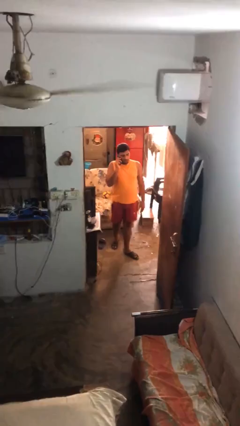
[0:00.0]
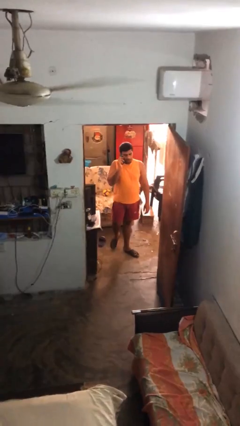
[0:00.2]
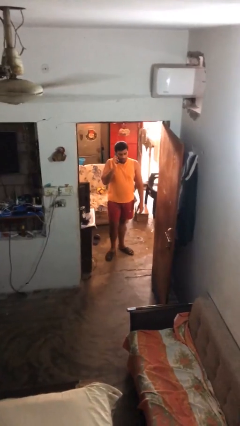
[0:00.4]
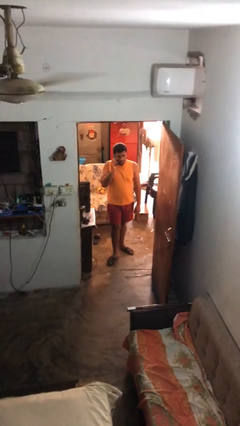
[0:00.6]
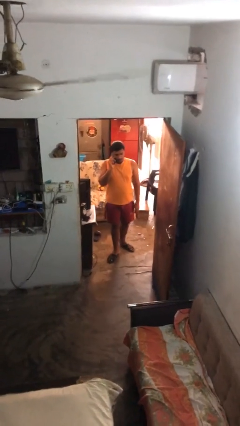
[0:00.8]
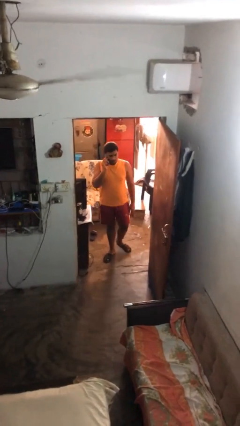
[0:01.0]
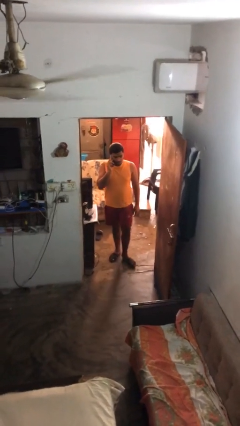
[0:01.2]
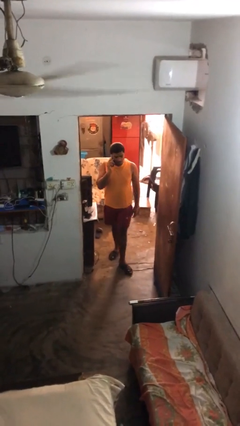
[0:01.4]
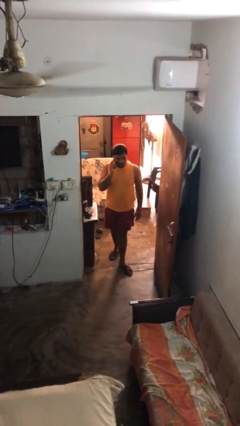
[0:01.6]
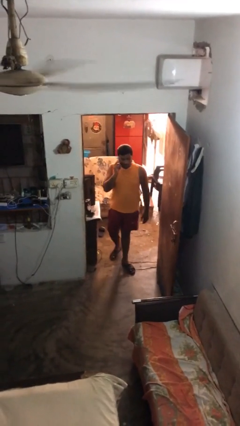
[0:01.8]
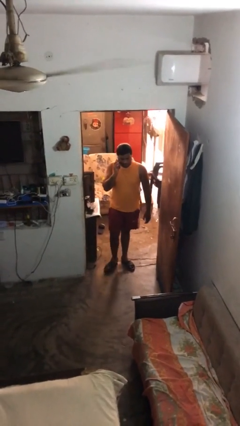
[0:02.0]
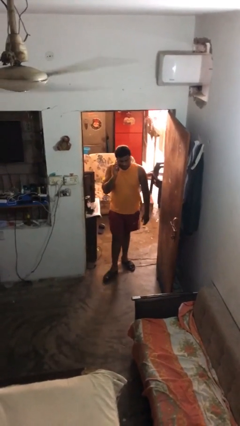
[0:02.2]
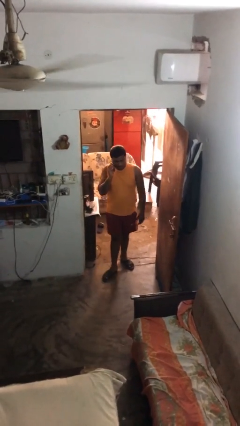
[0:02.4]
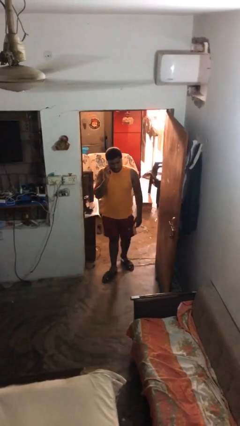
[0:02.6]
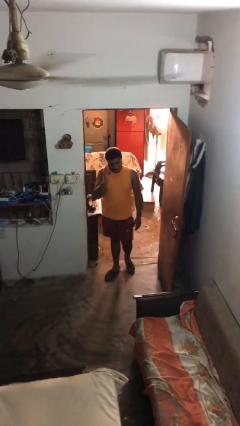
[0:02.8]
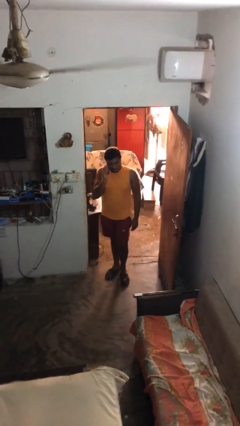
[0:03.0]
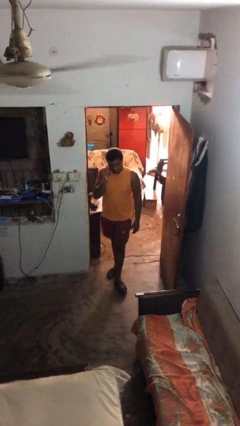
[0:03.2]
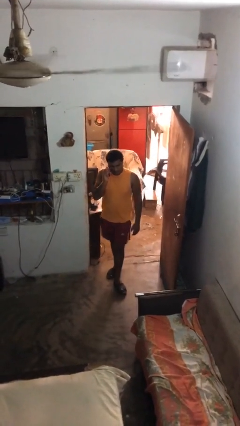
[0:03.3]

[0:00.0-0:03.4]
person enters scene through structure

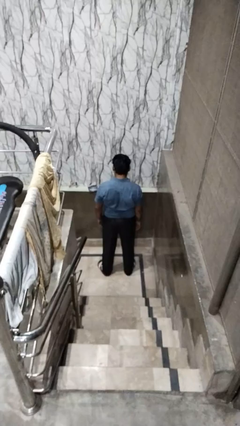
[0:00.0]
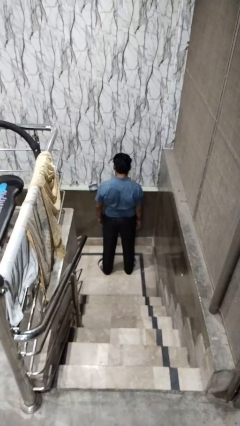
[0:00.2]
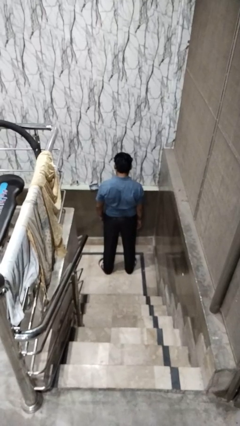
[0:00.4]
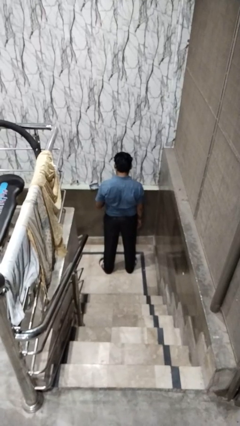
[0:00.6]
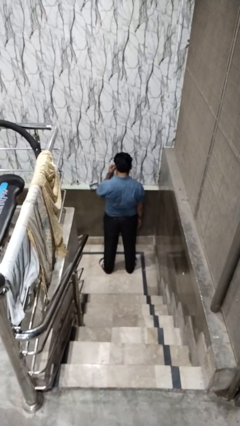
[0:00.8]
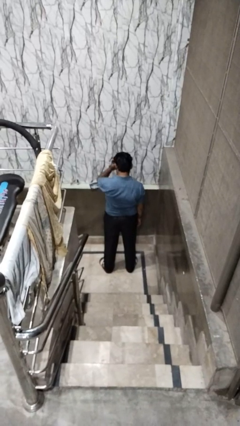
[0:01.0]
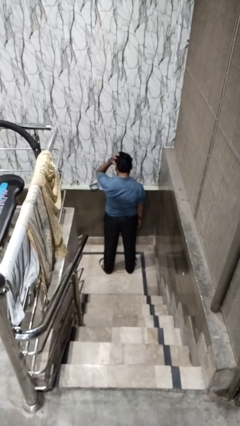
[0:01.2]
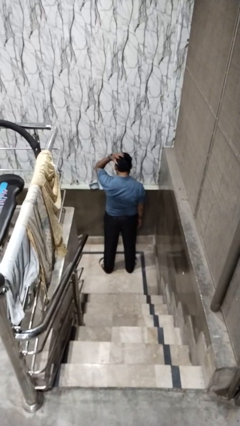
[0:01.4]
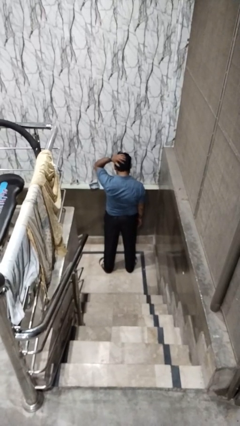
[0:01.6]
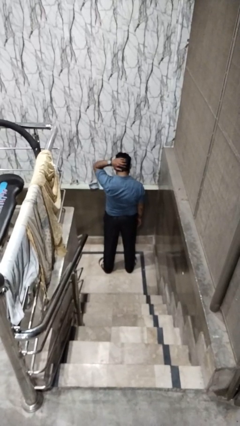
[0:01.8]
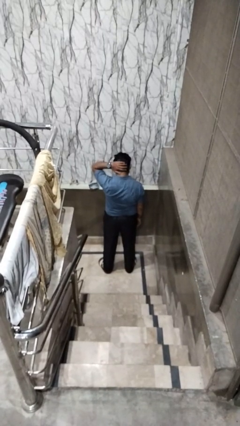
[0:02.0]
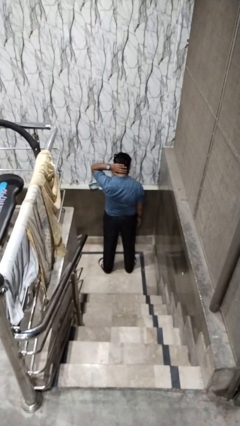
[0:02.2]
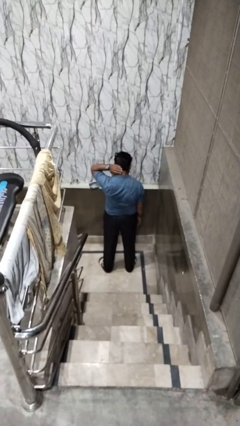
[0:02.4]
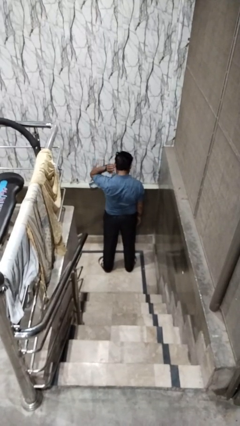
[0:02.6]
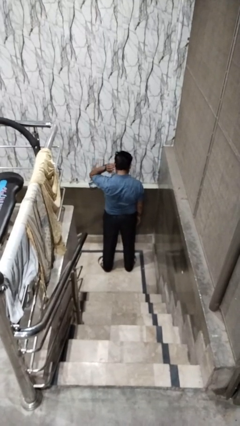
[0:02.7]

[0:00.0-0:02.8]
person strokes hair

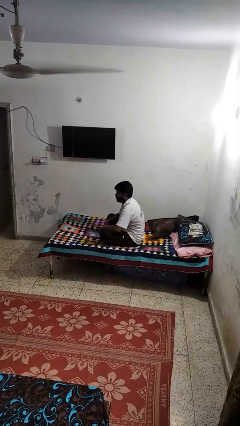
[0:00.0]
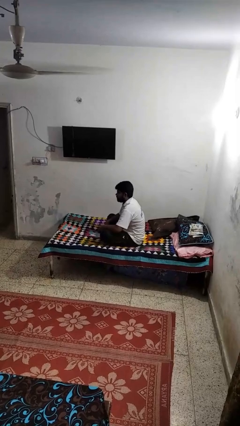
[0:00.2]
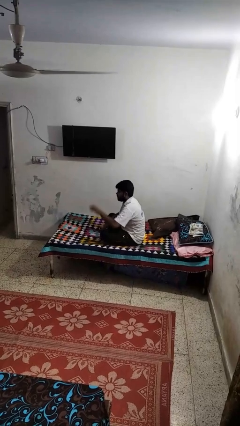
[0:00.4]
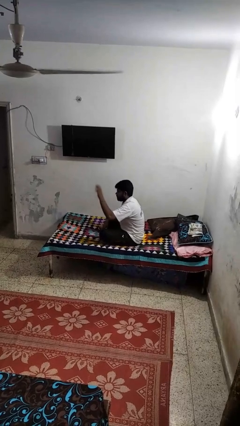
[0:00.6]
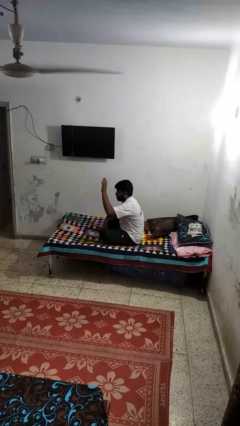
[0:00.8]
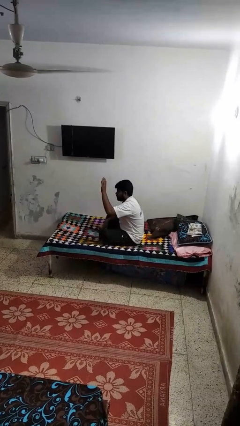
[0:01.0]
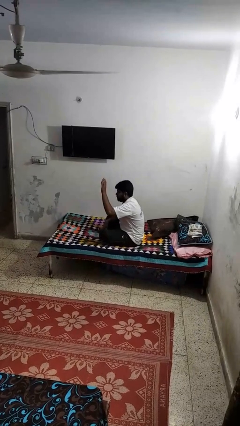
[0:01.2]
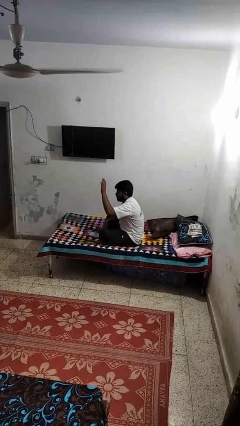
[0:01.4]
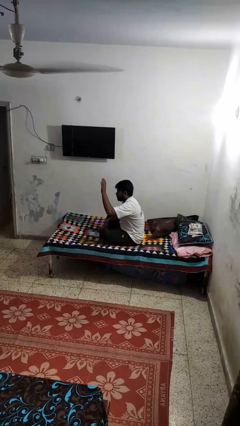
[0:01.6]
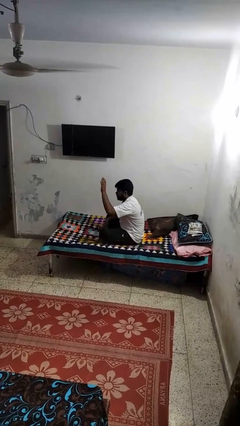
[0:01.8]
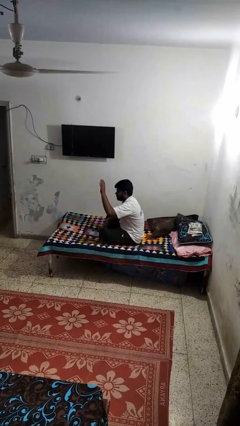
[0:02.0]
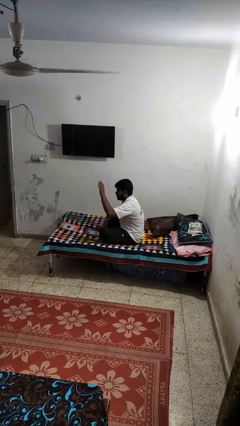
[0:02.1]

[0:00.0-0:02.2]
person gestures raise hand

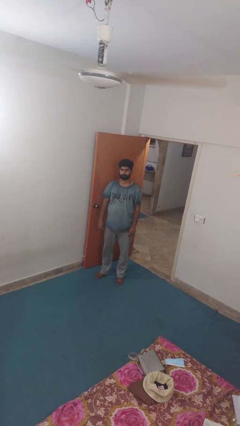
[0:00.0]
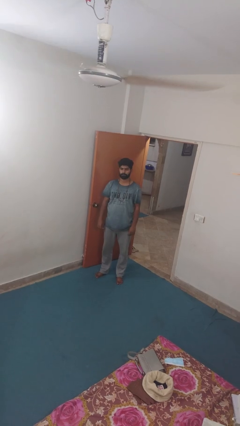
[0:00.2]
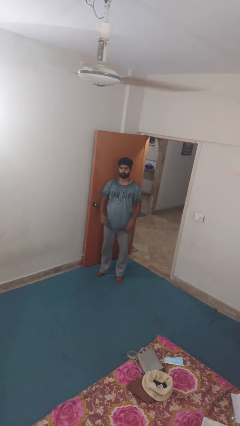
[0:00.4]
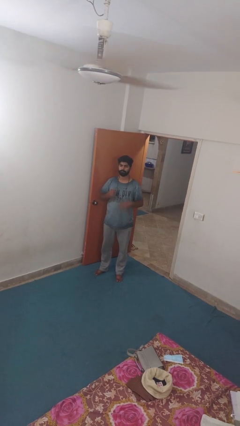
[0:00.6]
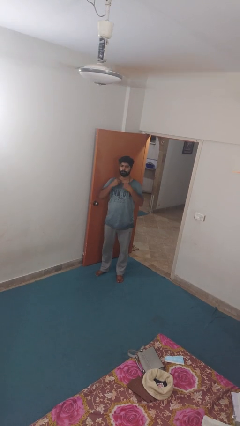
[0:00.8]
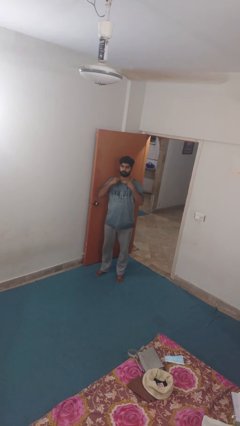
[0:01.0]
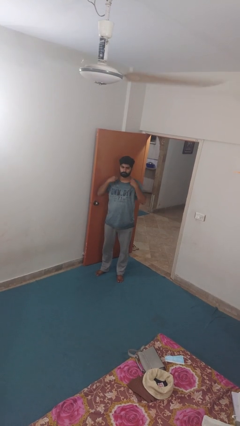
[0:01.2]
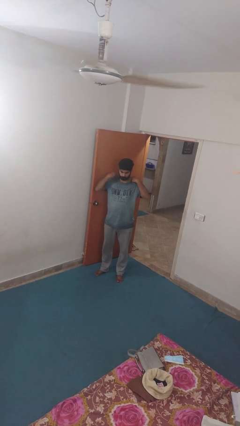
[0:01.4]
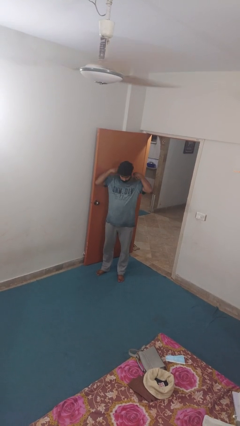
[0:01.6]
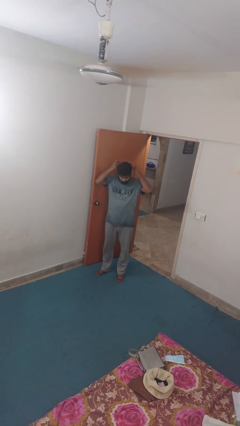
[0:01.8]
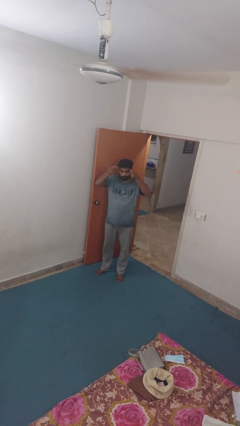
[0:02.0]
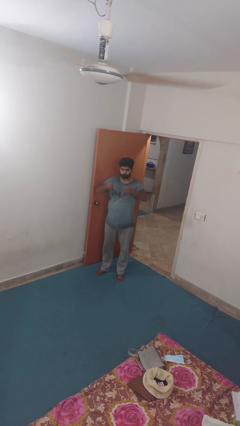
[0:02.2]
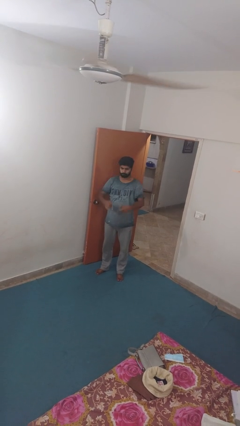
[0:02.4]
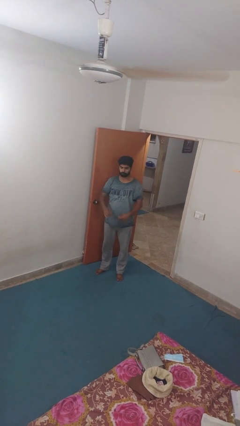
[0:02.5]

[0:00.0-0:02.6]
person takes off necklace

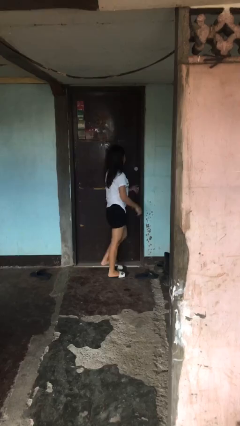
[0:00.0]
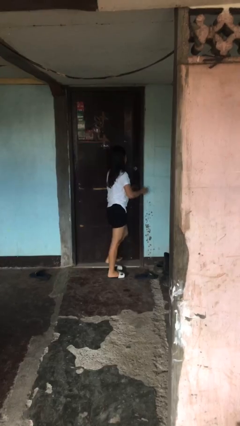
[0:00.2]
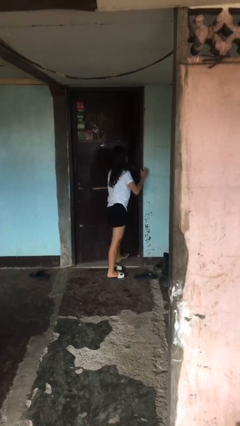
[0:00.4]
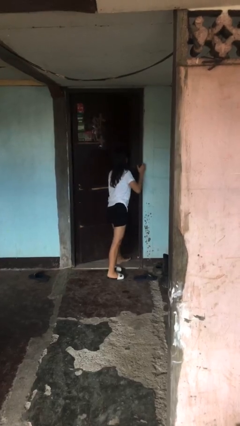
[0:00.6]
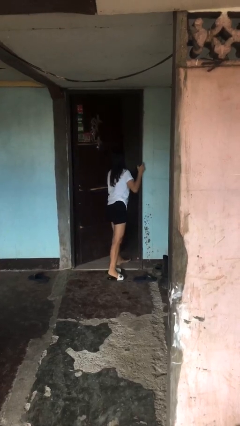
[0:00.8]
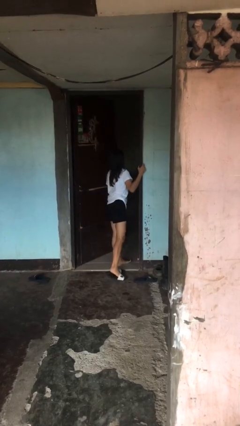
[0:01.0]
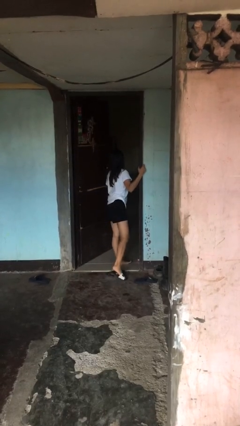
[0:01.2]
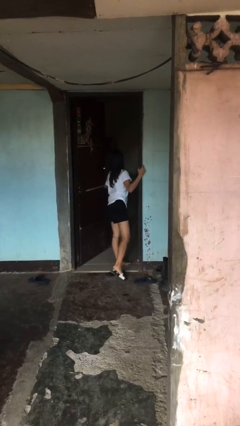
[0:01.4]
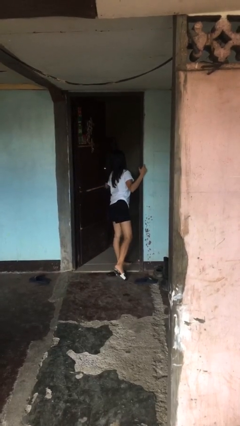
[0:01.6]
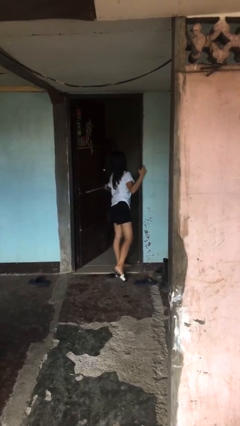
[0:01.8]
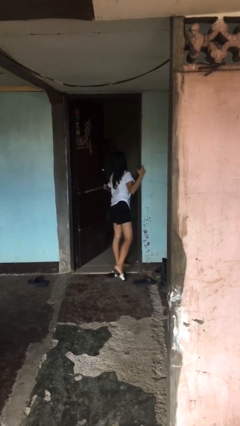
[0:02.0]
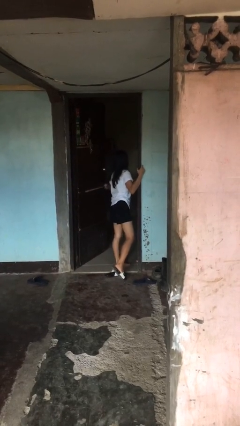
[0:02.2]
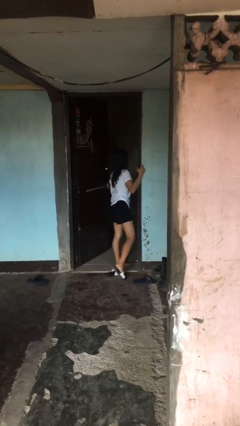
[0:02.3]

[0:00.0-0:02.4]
person opens facility door

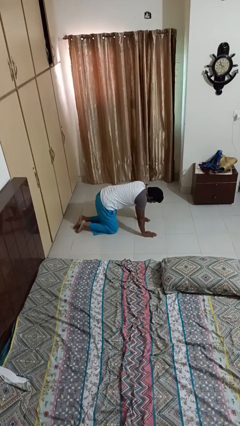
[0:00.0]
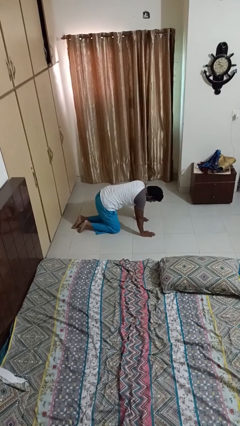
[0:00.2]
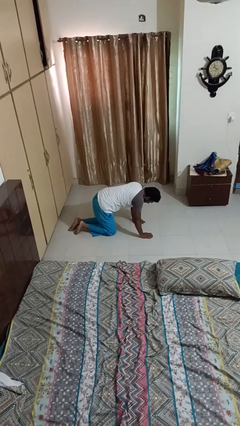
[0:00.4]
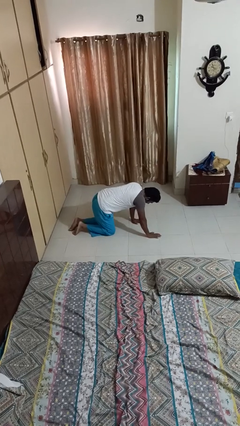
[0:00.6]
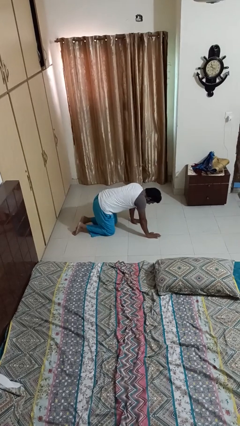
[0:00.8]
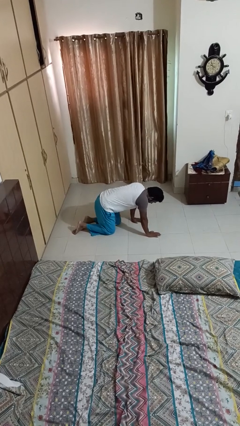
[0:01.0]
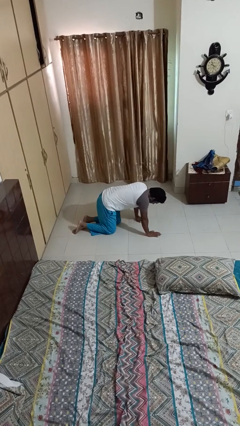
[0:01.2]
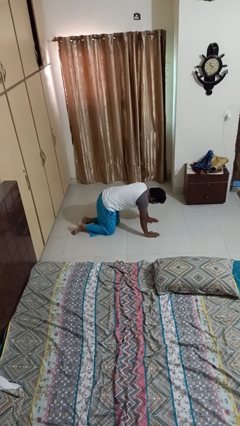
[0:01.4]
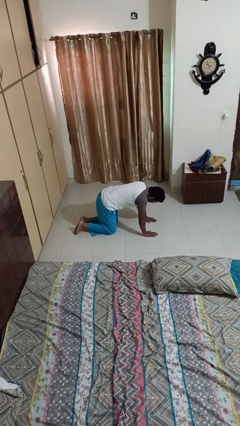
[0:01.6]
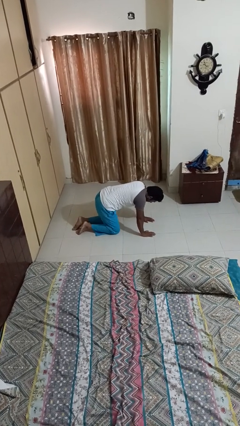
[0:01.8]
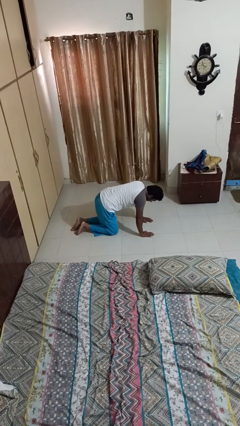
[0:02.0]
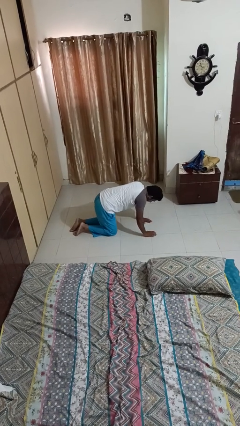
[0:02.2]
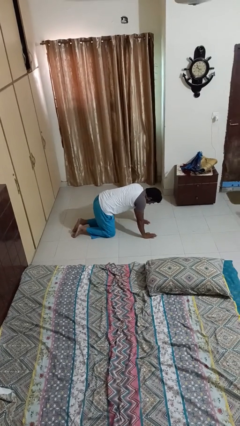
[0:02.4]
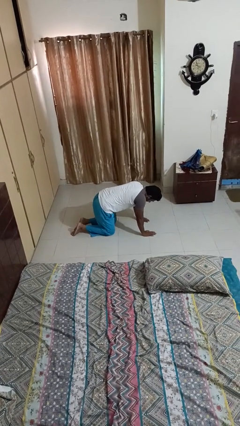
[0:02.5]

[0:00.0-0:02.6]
person crawls

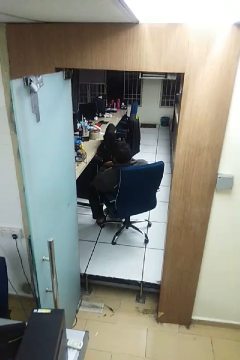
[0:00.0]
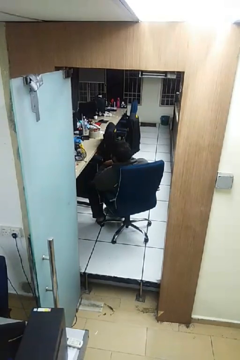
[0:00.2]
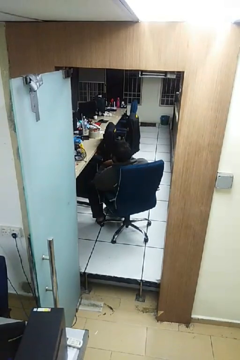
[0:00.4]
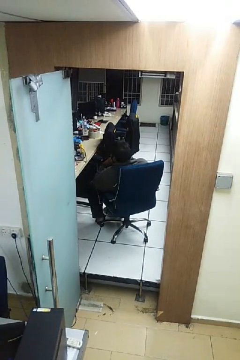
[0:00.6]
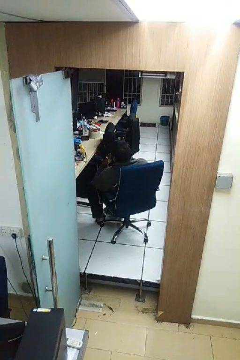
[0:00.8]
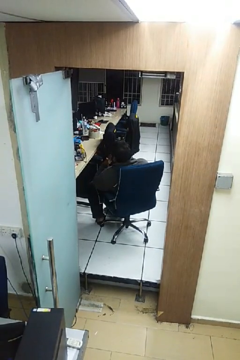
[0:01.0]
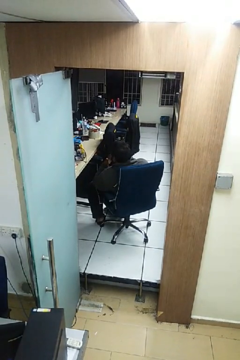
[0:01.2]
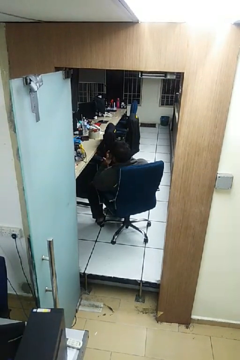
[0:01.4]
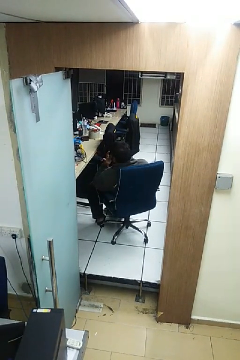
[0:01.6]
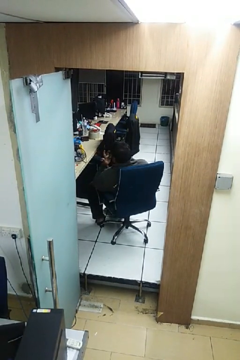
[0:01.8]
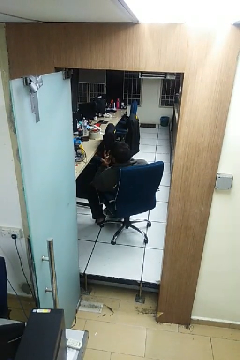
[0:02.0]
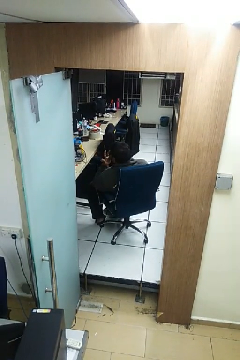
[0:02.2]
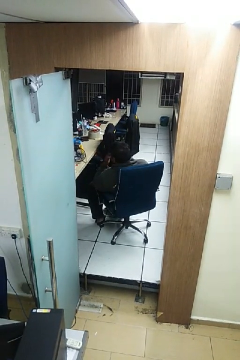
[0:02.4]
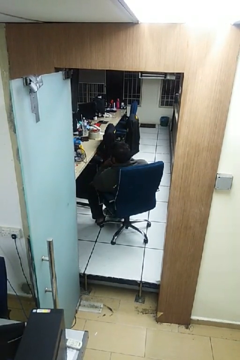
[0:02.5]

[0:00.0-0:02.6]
person licks fingers
